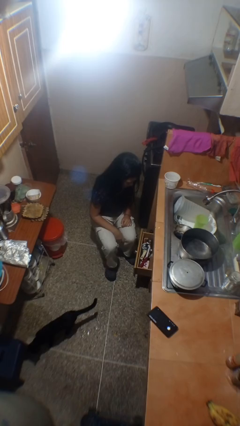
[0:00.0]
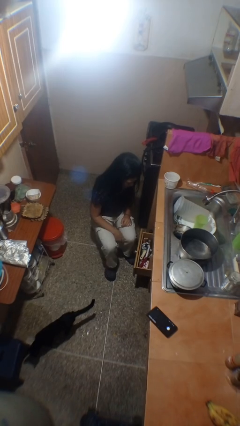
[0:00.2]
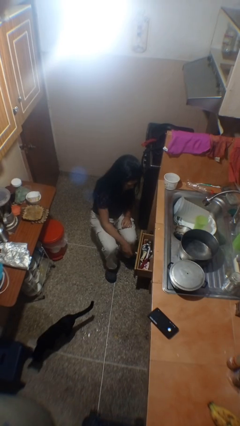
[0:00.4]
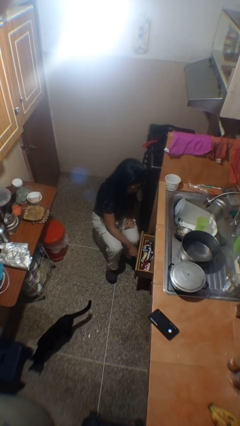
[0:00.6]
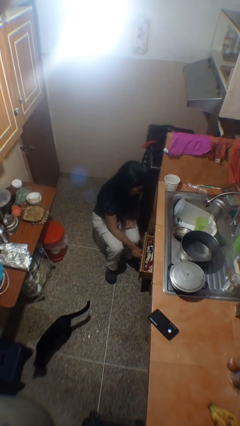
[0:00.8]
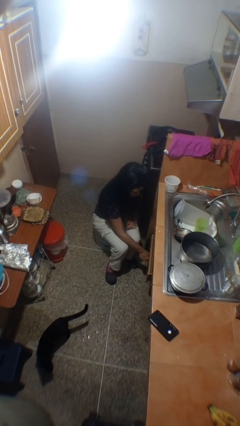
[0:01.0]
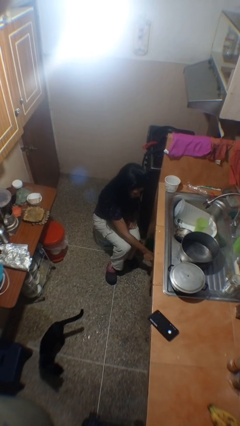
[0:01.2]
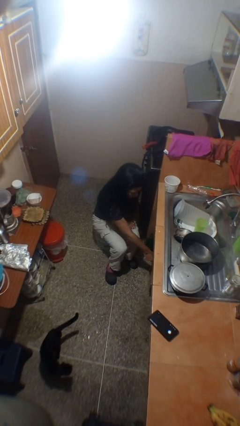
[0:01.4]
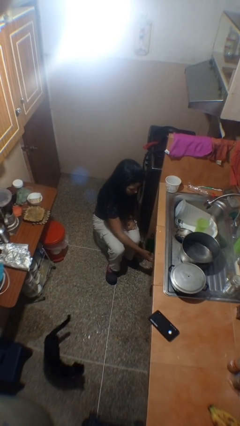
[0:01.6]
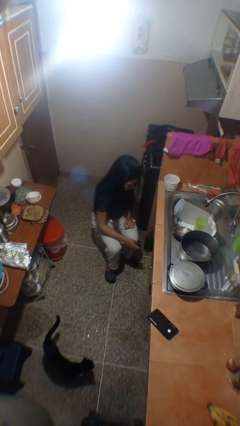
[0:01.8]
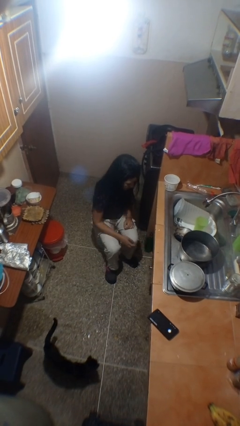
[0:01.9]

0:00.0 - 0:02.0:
person closes kitchen drawer

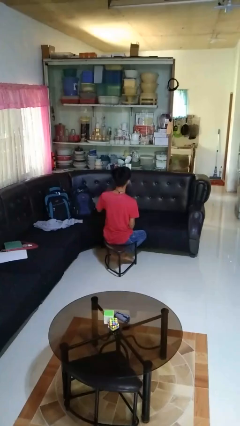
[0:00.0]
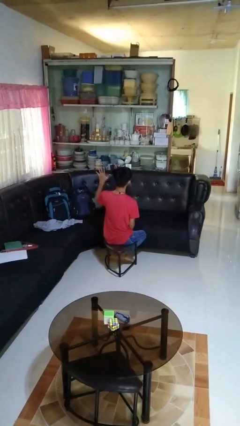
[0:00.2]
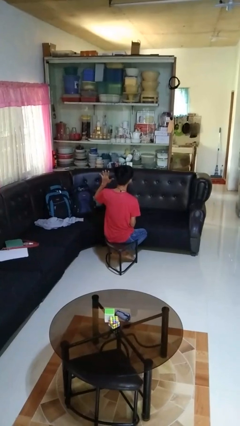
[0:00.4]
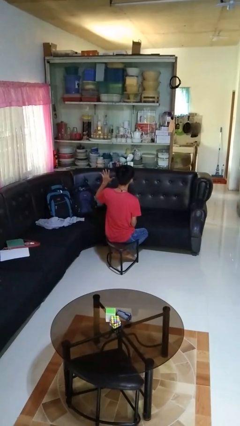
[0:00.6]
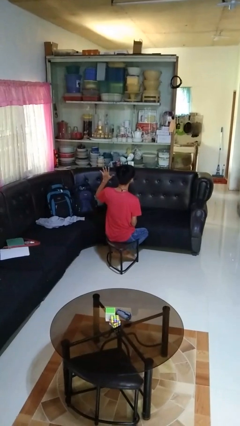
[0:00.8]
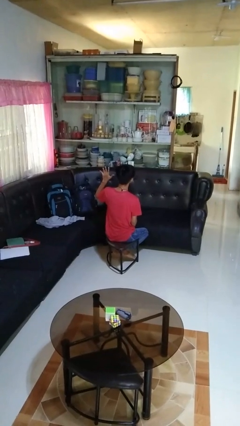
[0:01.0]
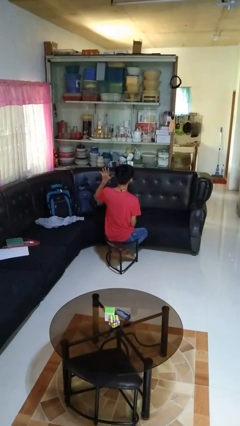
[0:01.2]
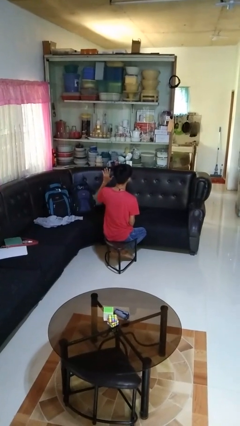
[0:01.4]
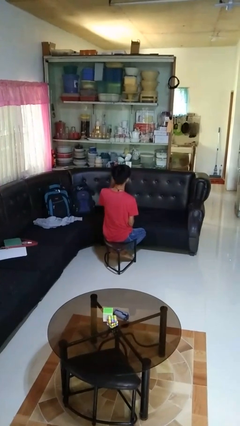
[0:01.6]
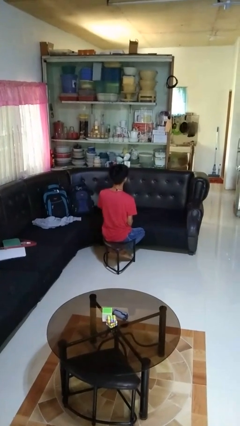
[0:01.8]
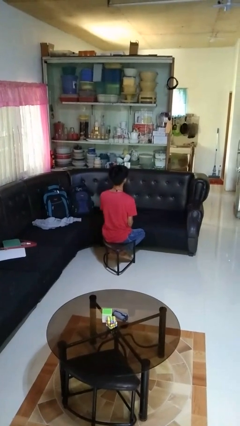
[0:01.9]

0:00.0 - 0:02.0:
person gestures number five

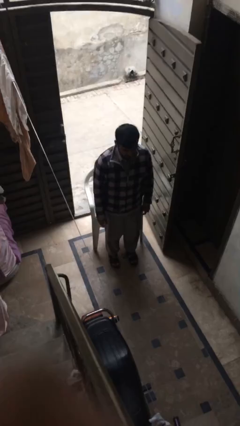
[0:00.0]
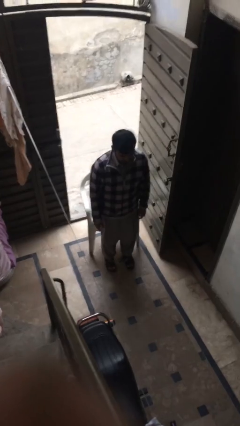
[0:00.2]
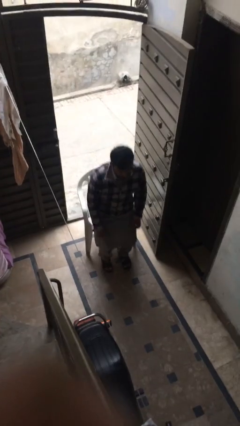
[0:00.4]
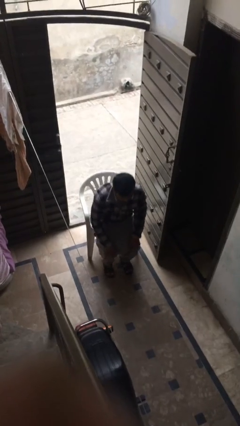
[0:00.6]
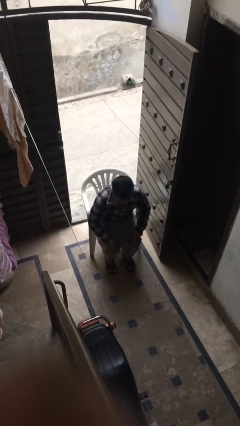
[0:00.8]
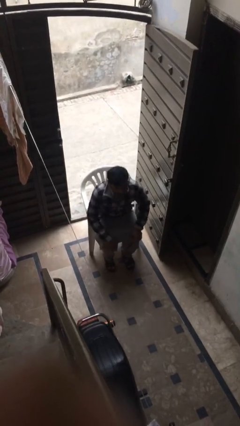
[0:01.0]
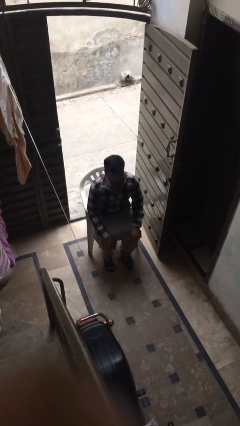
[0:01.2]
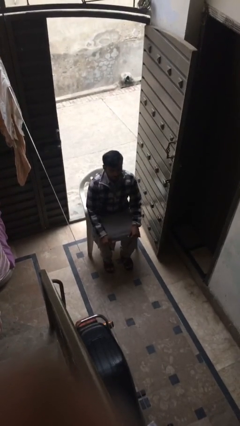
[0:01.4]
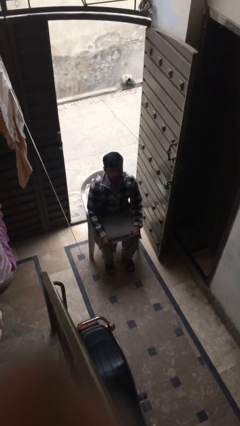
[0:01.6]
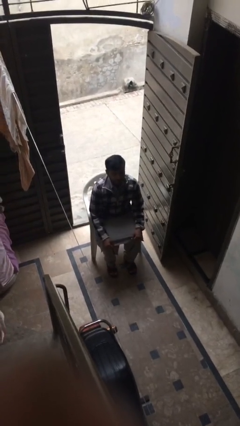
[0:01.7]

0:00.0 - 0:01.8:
person sits down

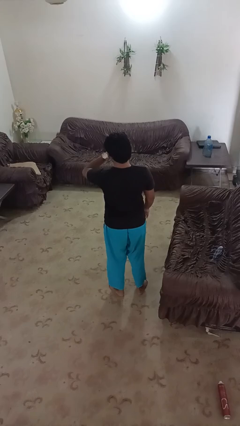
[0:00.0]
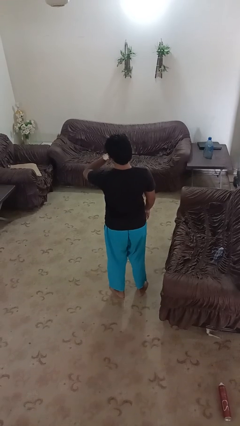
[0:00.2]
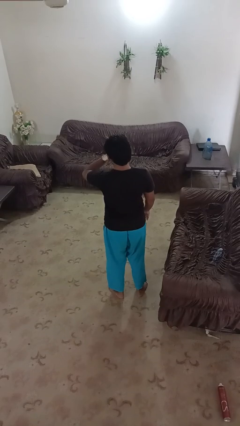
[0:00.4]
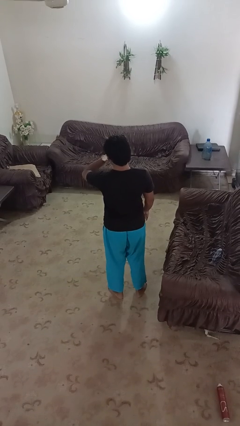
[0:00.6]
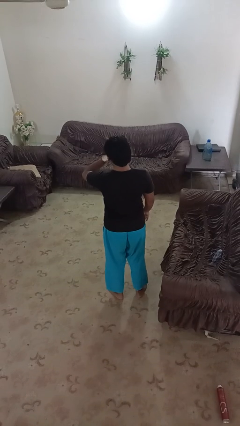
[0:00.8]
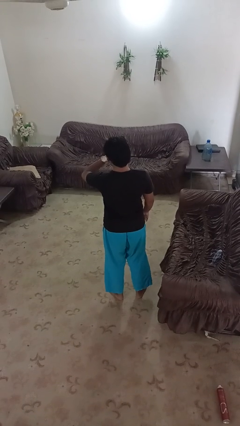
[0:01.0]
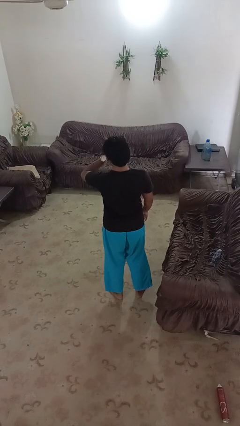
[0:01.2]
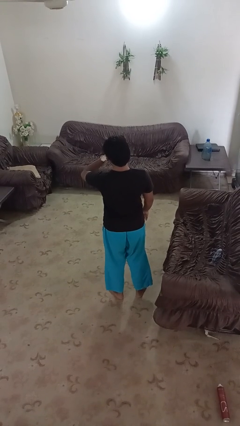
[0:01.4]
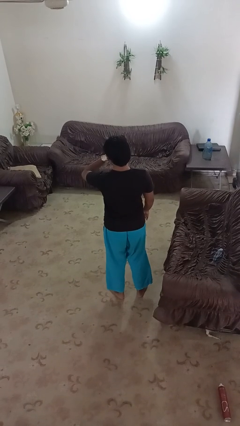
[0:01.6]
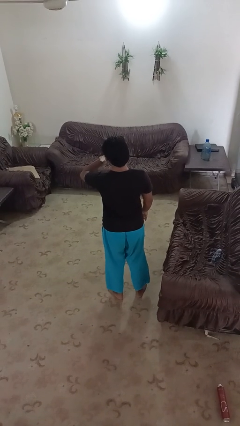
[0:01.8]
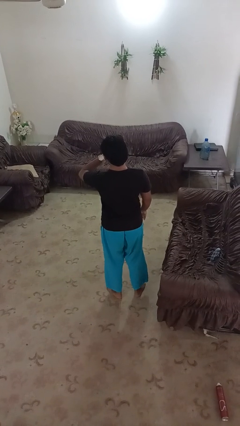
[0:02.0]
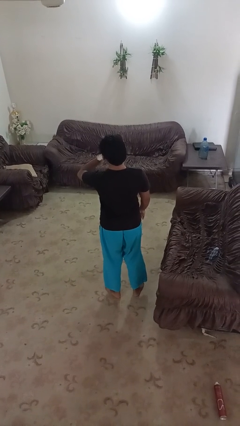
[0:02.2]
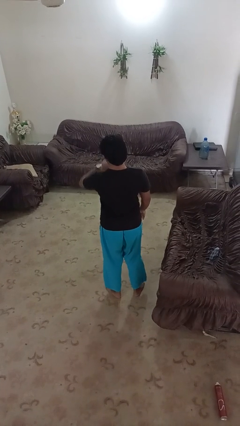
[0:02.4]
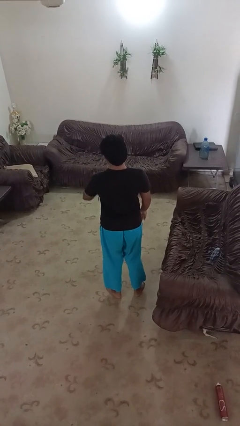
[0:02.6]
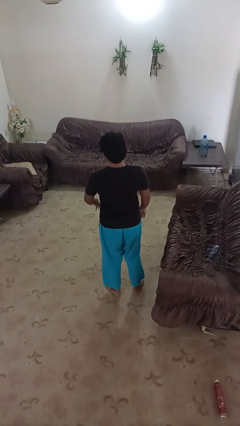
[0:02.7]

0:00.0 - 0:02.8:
person looks at wristwatch

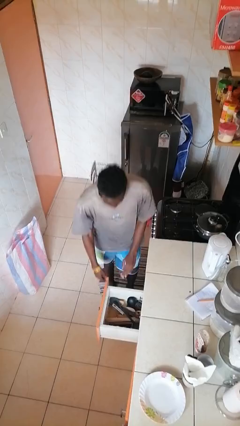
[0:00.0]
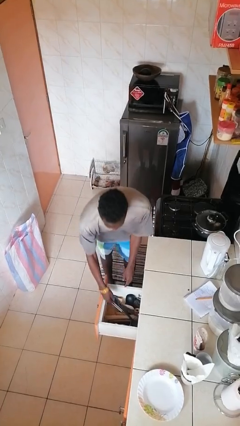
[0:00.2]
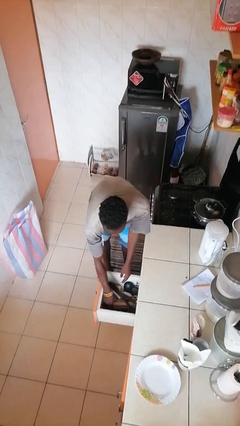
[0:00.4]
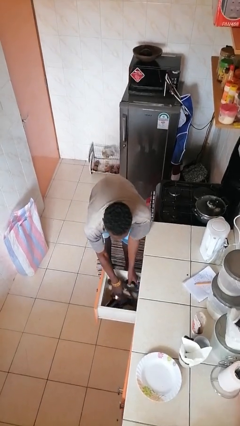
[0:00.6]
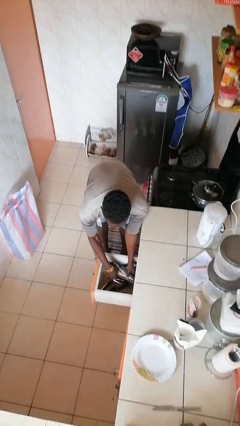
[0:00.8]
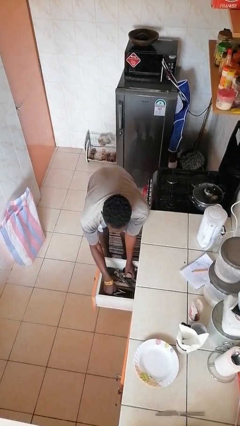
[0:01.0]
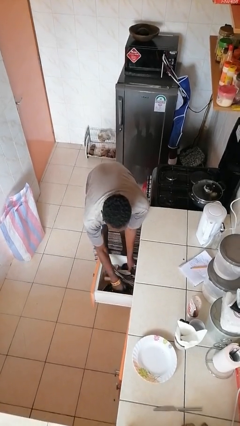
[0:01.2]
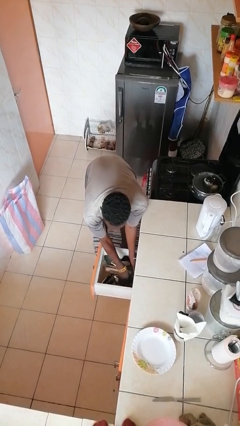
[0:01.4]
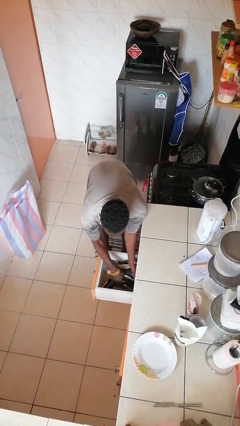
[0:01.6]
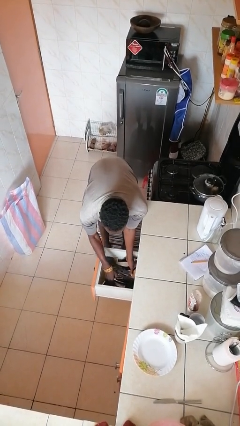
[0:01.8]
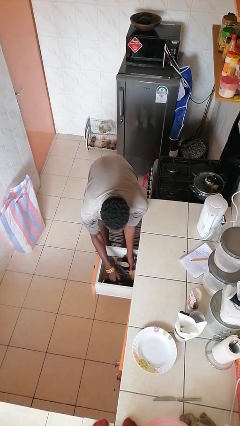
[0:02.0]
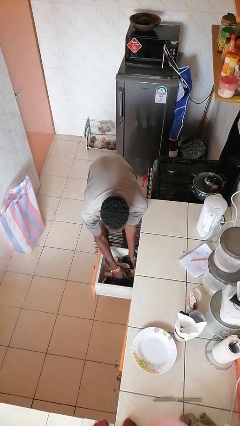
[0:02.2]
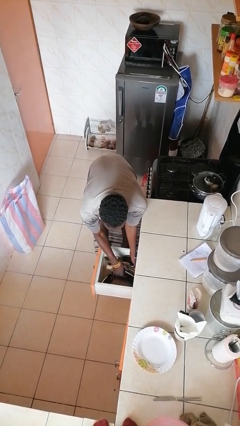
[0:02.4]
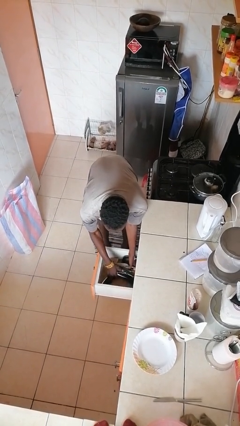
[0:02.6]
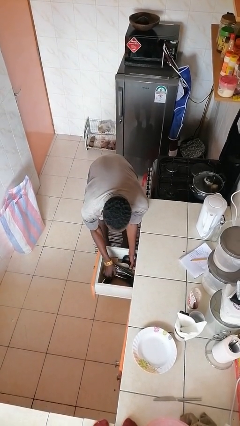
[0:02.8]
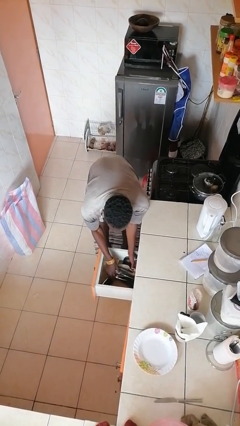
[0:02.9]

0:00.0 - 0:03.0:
person searches in kitchen drawer

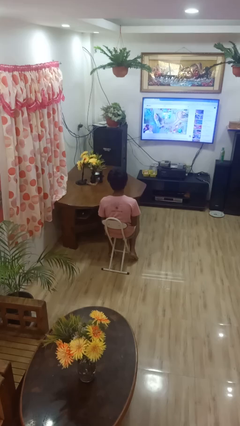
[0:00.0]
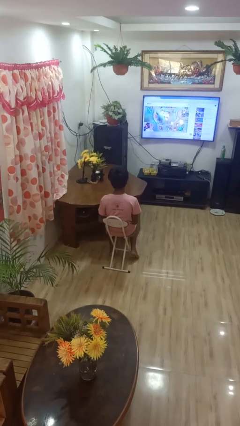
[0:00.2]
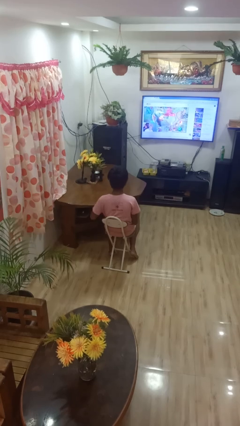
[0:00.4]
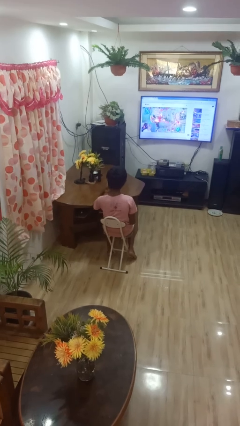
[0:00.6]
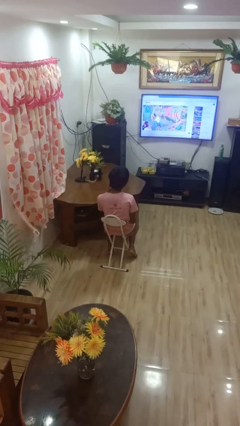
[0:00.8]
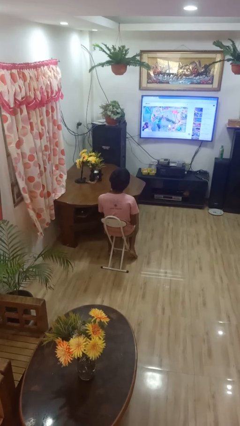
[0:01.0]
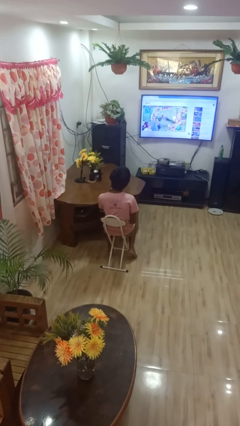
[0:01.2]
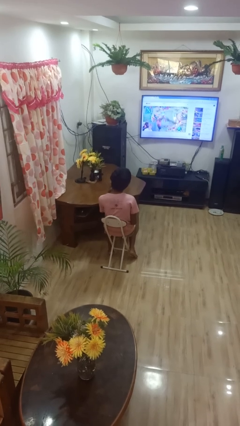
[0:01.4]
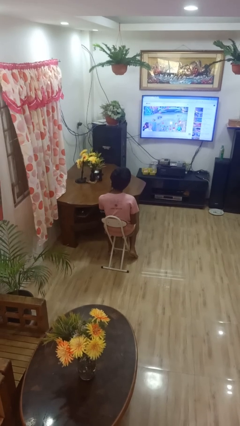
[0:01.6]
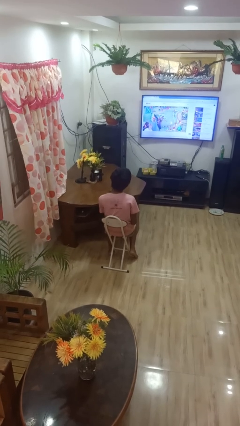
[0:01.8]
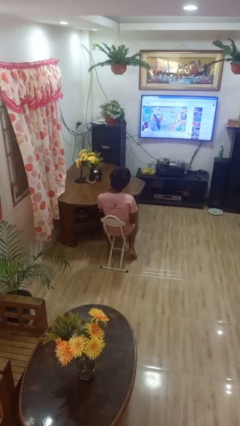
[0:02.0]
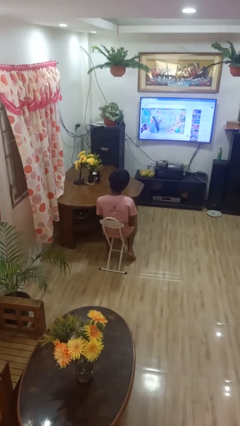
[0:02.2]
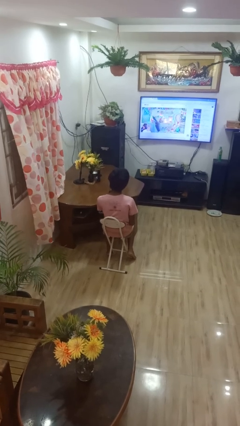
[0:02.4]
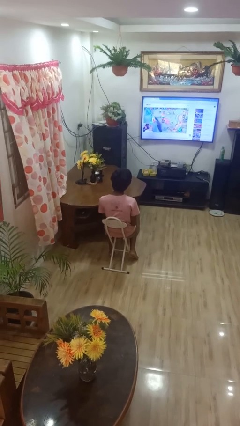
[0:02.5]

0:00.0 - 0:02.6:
person rubs neck

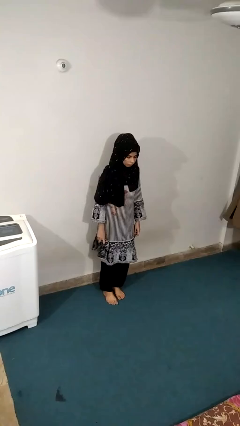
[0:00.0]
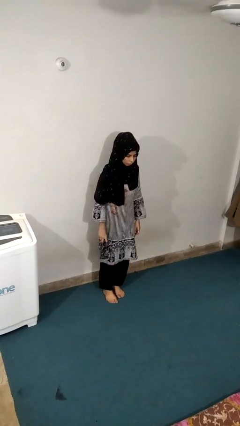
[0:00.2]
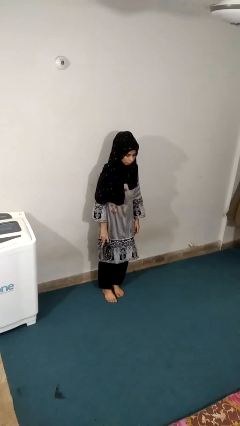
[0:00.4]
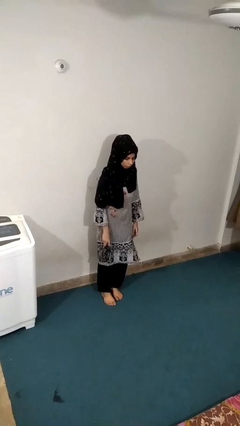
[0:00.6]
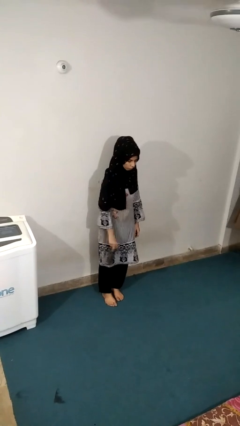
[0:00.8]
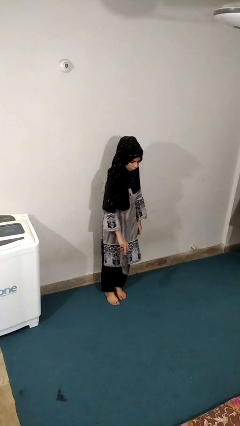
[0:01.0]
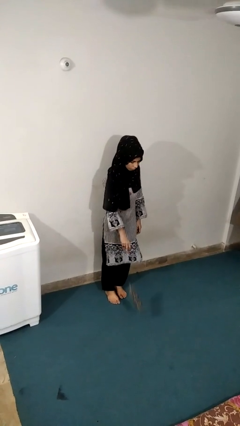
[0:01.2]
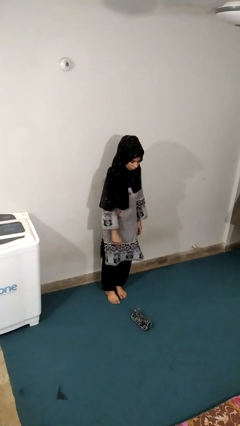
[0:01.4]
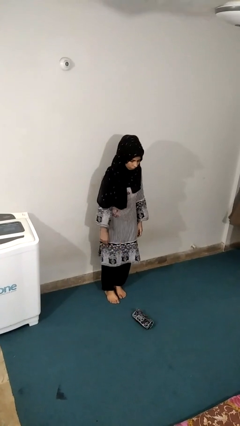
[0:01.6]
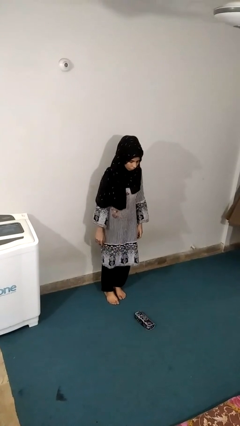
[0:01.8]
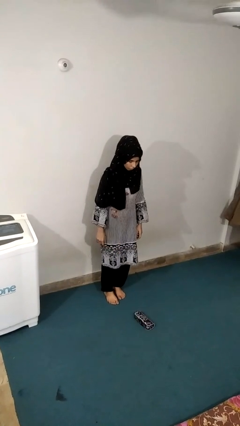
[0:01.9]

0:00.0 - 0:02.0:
person throws object to ground

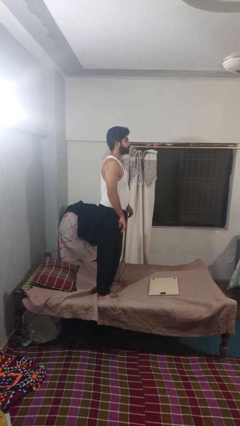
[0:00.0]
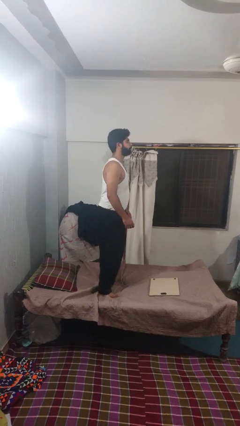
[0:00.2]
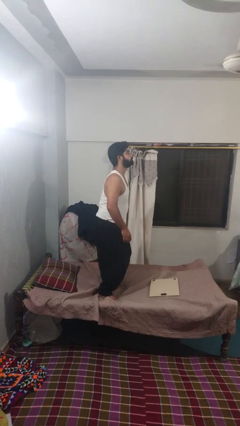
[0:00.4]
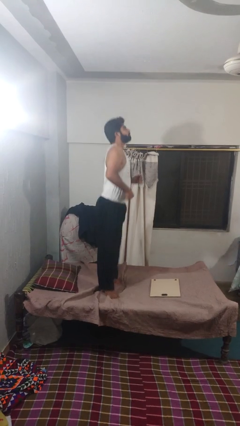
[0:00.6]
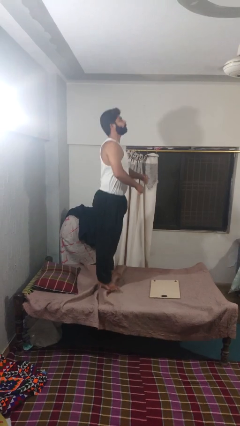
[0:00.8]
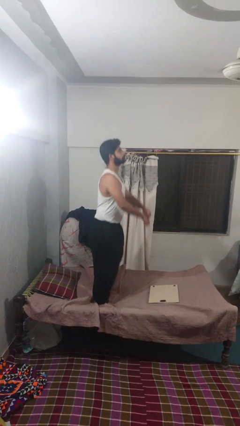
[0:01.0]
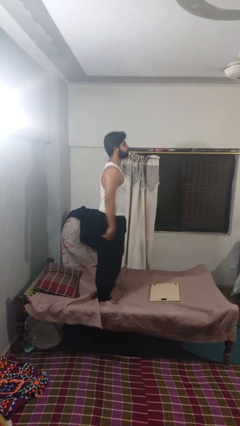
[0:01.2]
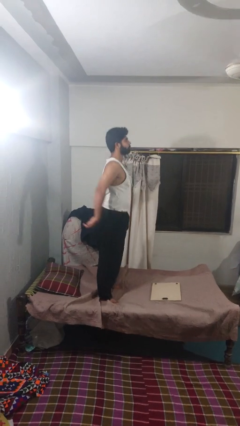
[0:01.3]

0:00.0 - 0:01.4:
person jumps on bed
